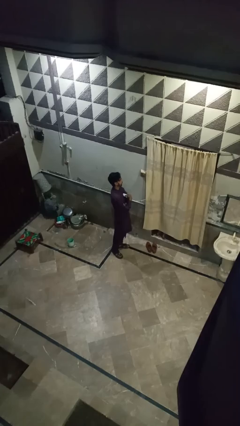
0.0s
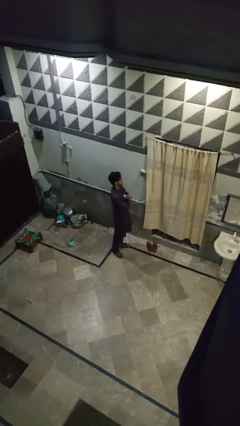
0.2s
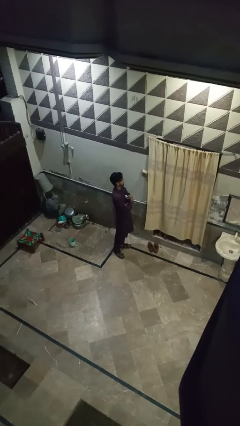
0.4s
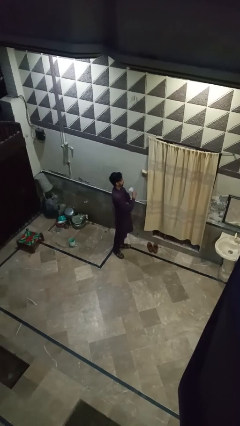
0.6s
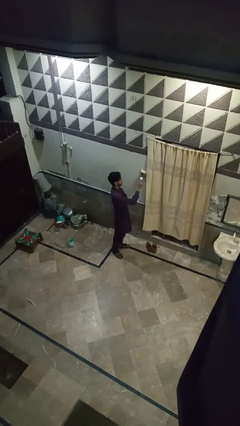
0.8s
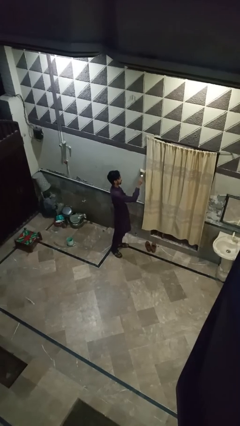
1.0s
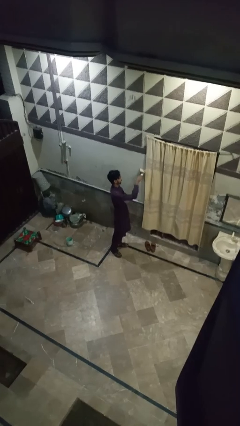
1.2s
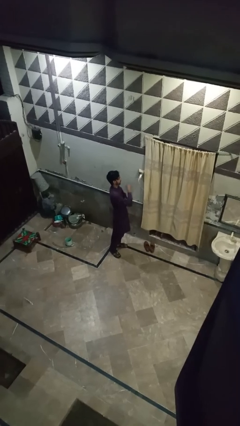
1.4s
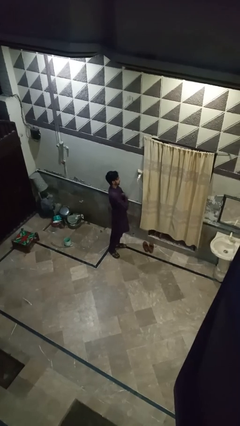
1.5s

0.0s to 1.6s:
person plugs into electrical socket

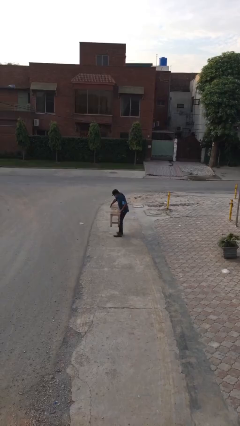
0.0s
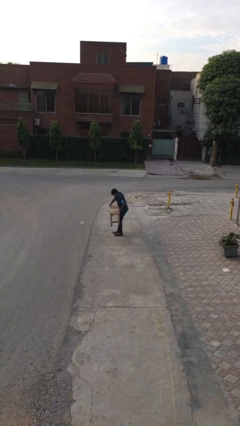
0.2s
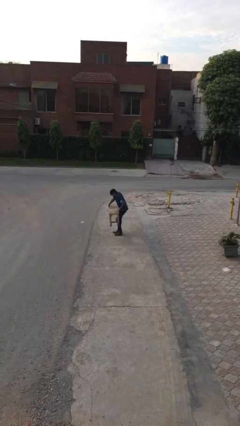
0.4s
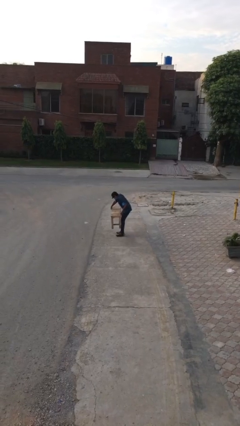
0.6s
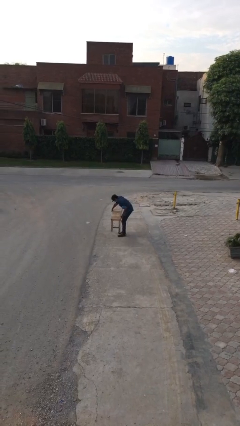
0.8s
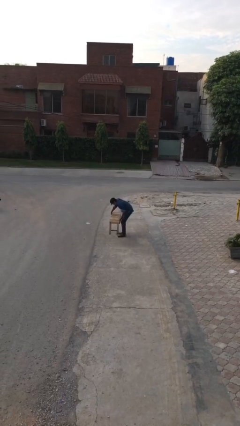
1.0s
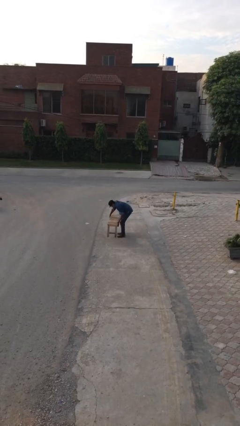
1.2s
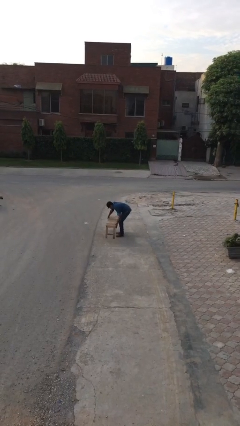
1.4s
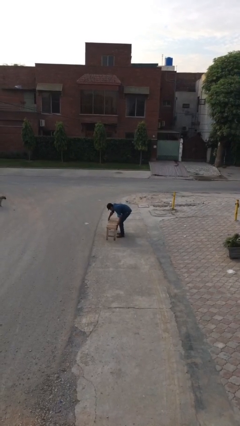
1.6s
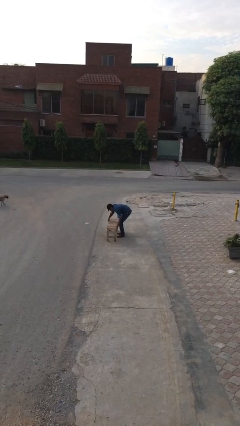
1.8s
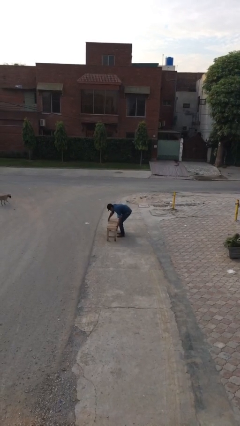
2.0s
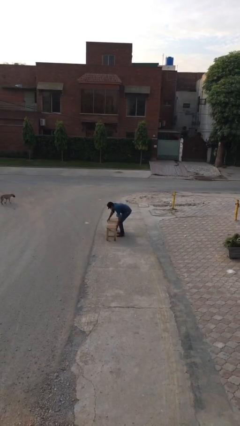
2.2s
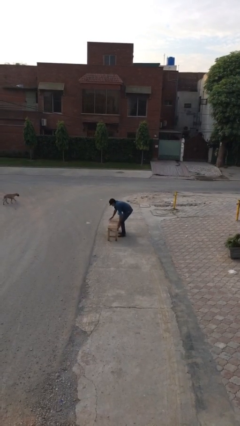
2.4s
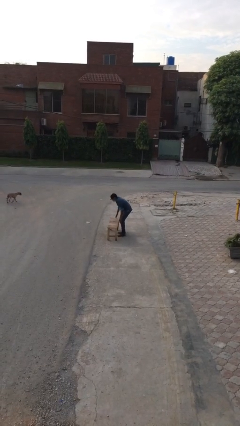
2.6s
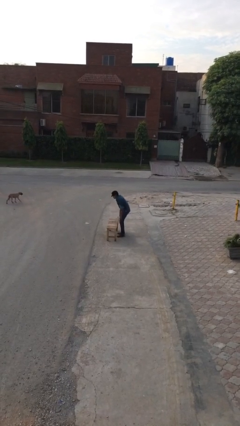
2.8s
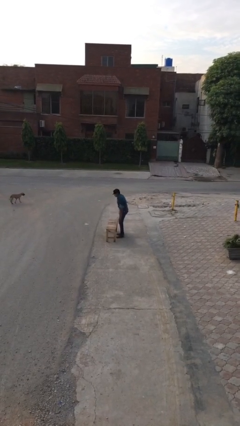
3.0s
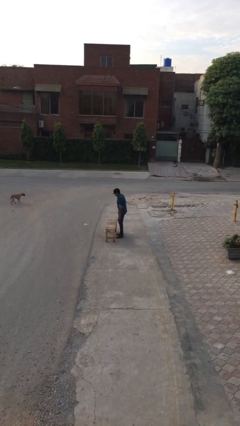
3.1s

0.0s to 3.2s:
person puts down object on floor

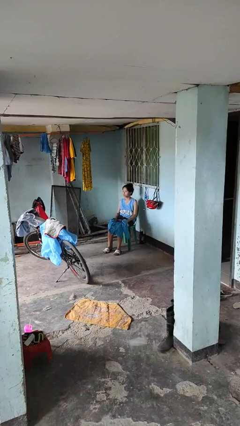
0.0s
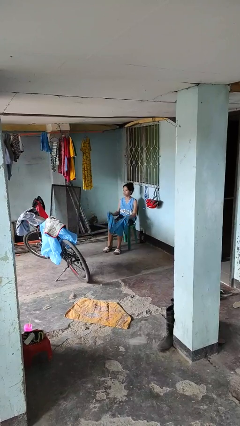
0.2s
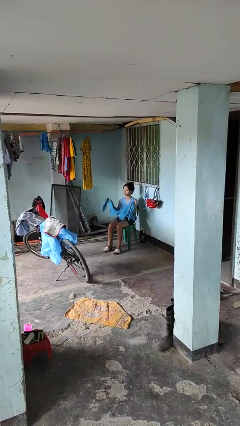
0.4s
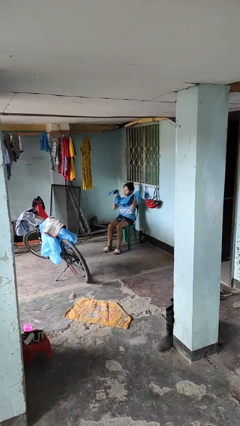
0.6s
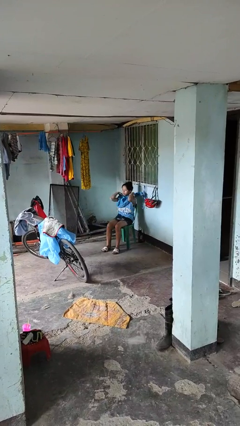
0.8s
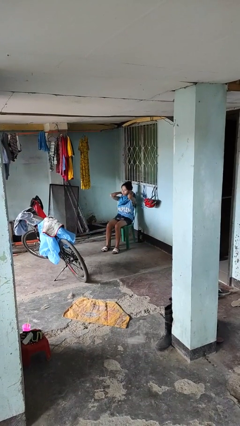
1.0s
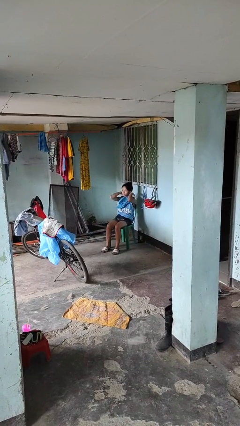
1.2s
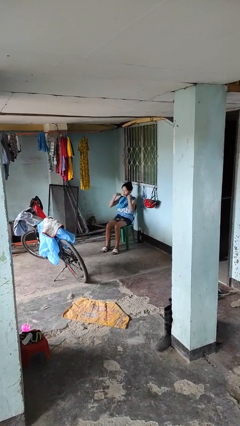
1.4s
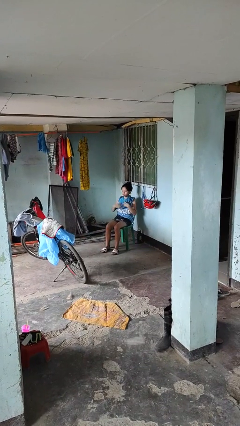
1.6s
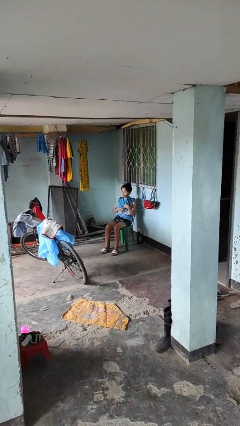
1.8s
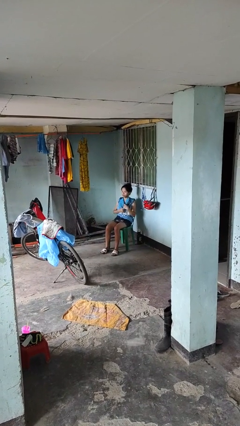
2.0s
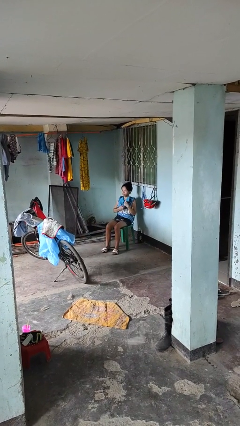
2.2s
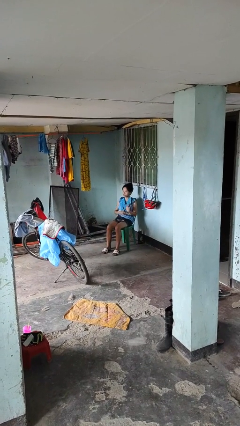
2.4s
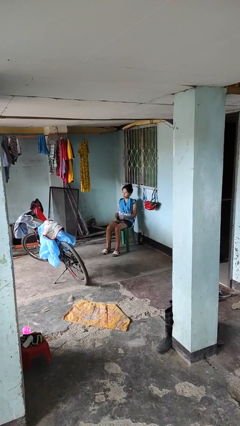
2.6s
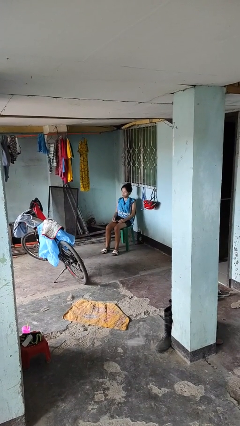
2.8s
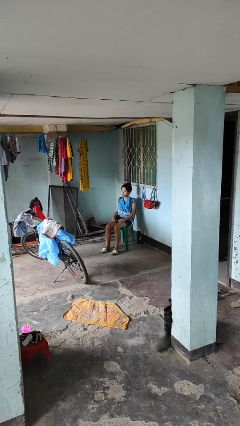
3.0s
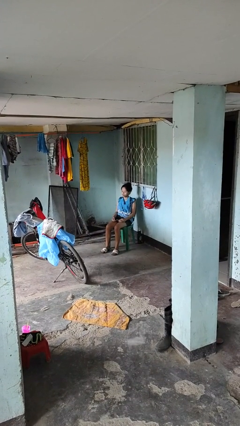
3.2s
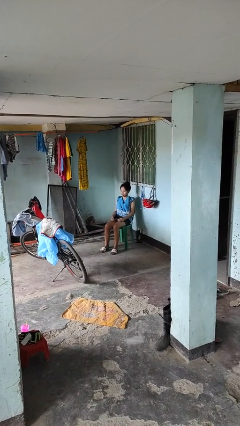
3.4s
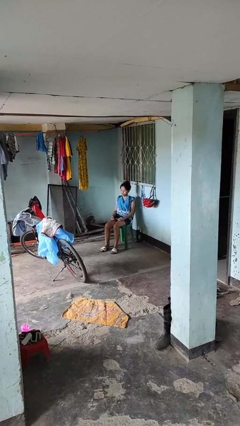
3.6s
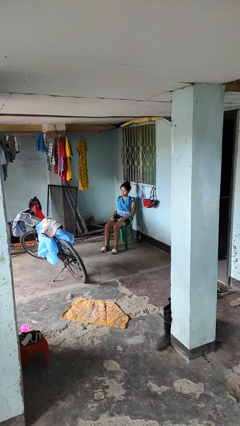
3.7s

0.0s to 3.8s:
person puts on scarf

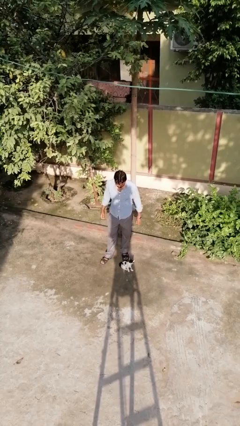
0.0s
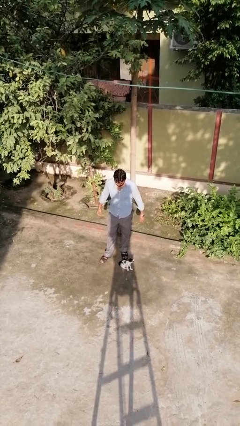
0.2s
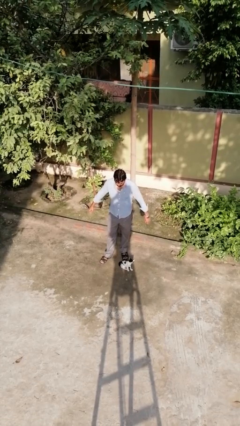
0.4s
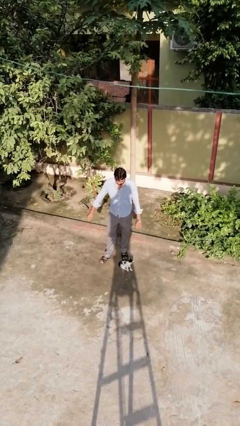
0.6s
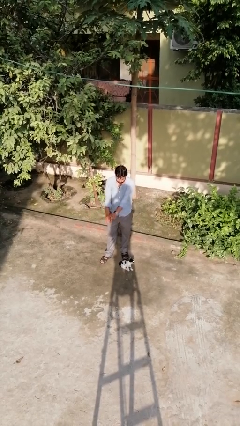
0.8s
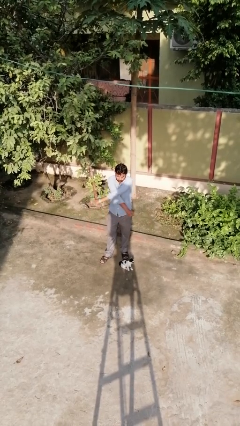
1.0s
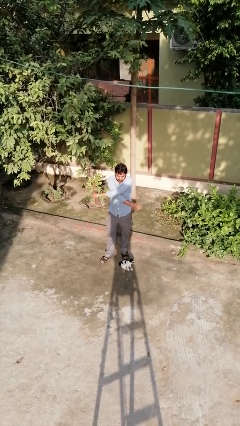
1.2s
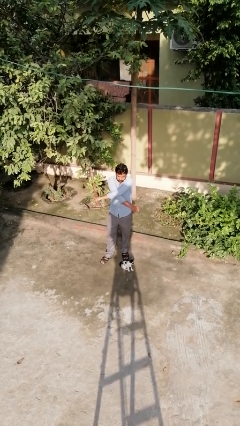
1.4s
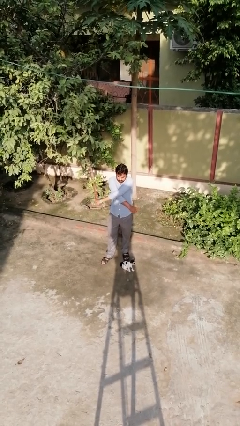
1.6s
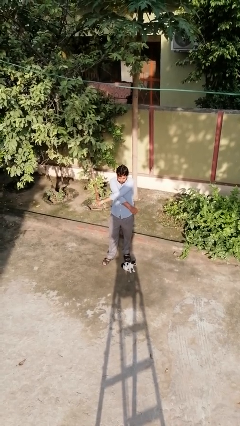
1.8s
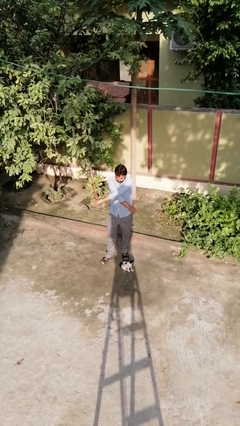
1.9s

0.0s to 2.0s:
person crosses arms

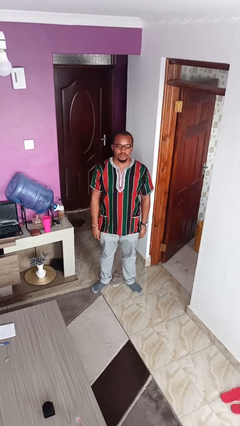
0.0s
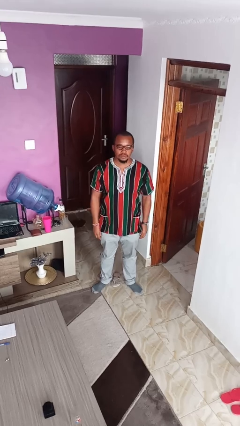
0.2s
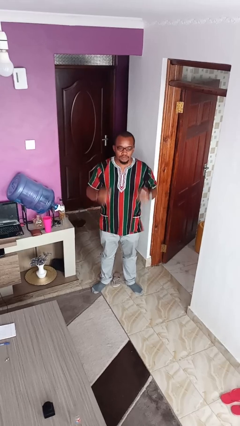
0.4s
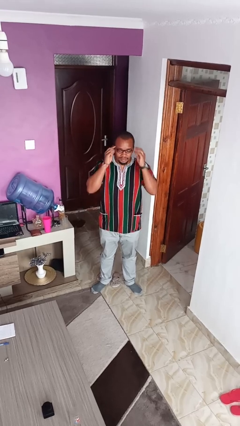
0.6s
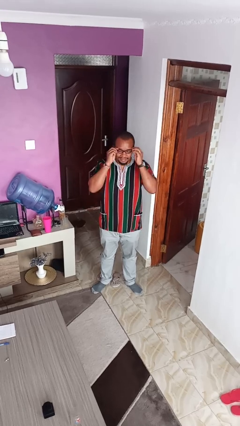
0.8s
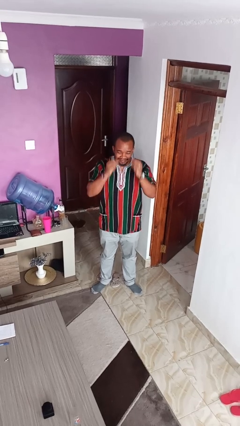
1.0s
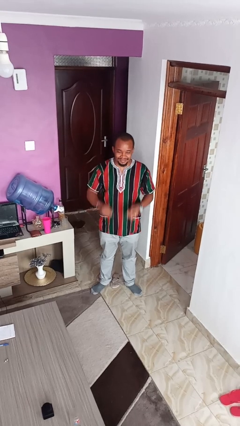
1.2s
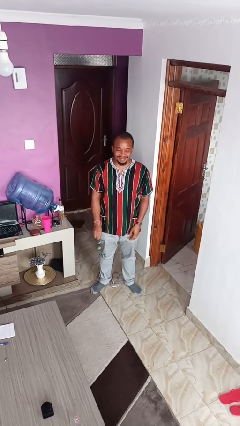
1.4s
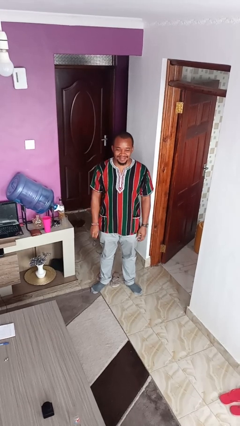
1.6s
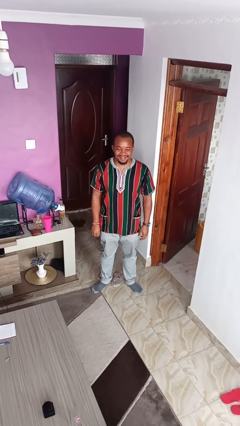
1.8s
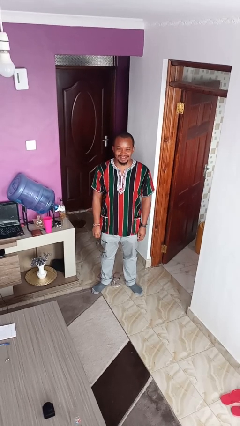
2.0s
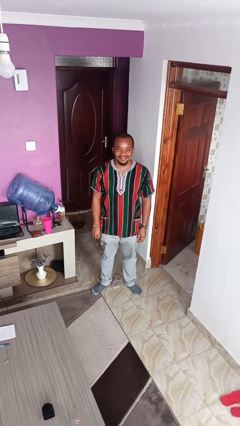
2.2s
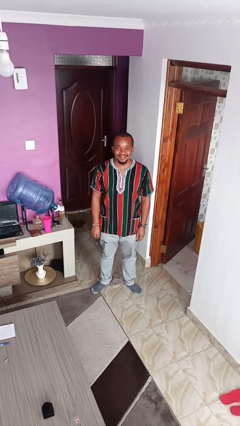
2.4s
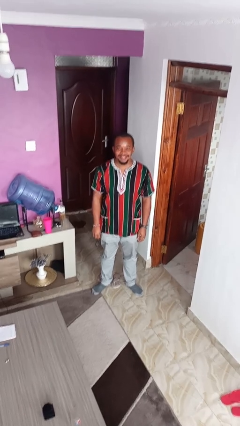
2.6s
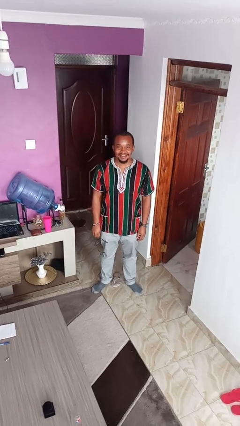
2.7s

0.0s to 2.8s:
person takes off glasses

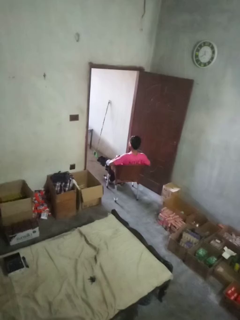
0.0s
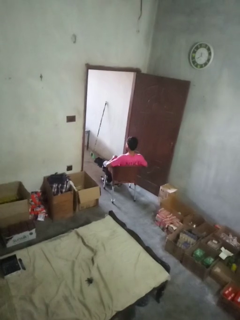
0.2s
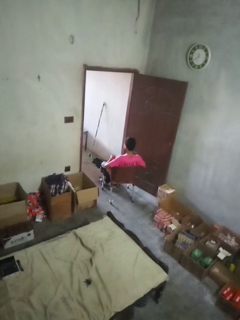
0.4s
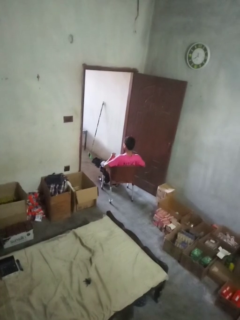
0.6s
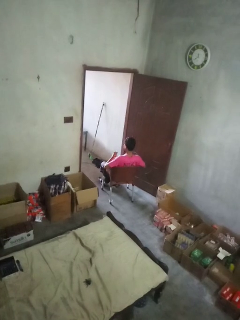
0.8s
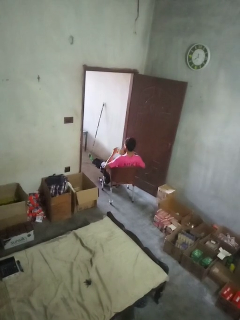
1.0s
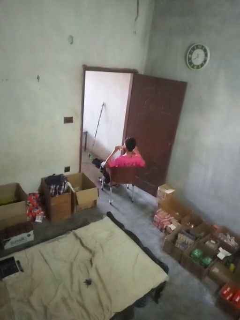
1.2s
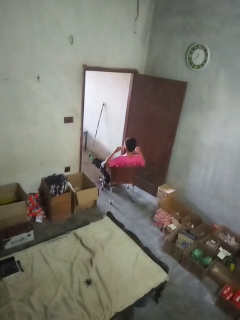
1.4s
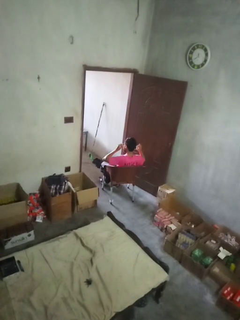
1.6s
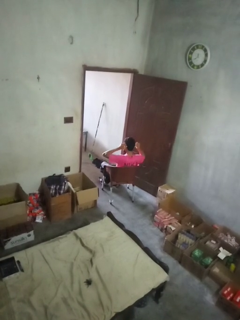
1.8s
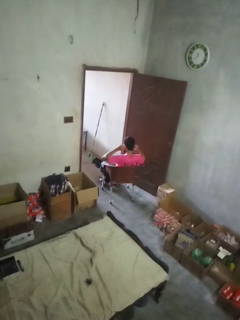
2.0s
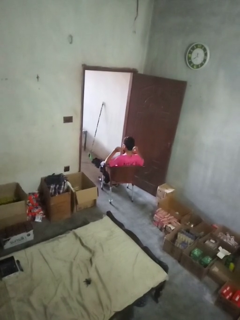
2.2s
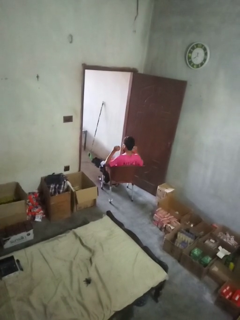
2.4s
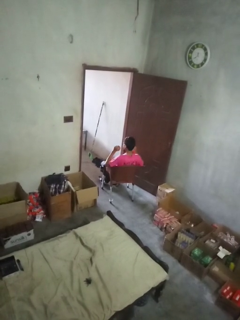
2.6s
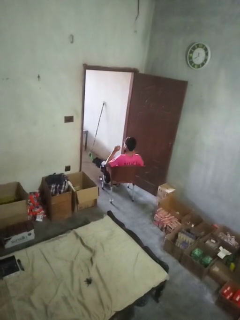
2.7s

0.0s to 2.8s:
person puts on facemask

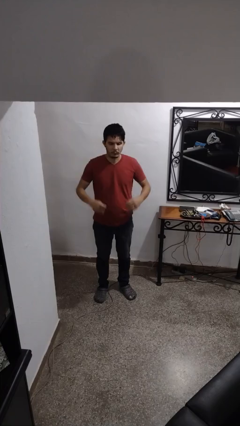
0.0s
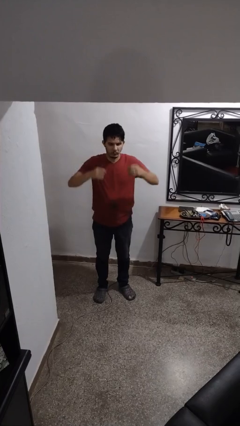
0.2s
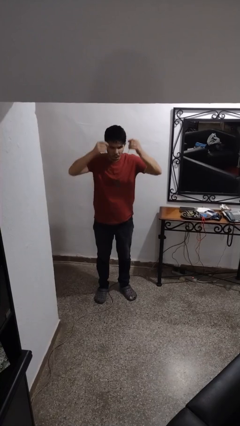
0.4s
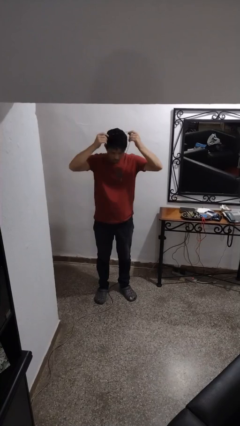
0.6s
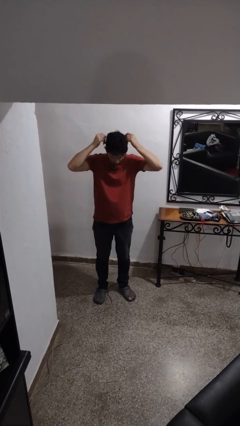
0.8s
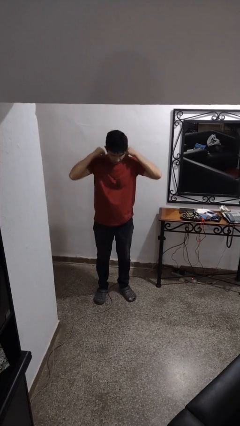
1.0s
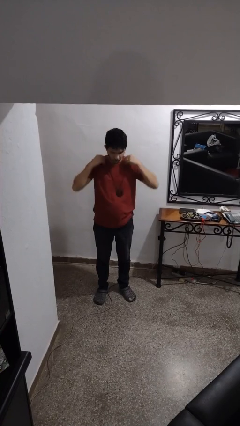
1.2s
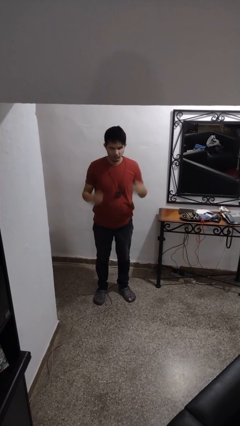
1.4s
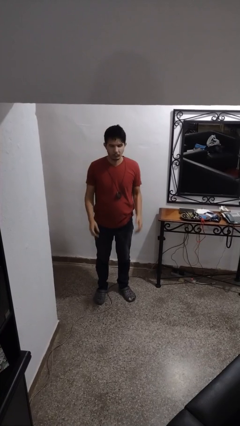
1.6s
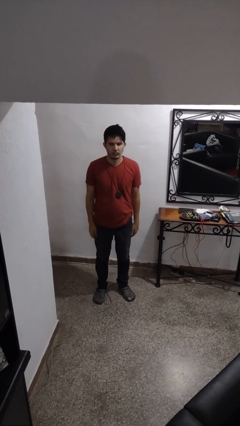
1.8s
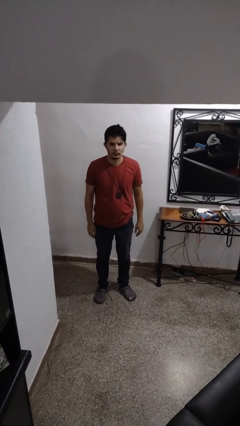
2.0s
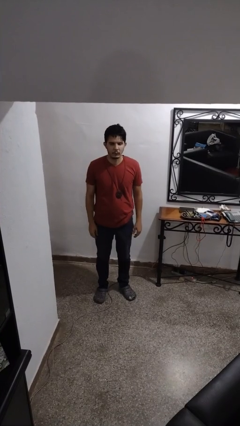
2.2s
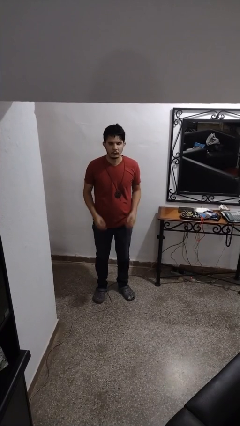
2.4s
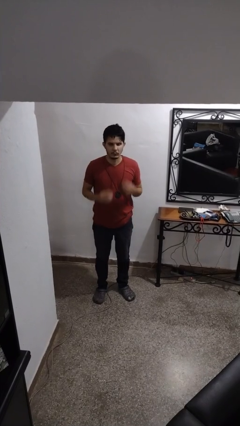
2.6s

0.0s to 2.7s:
person puts on necklace
